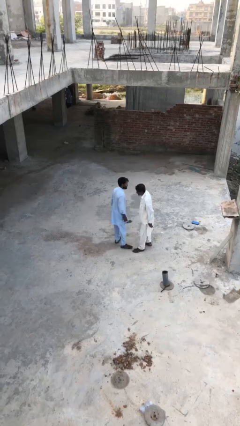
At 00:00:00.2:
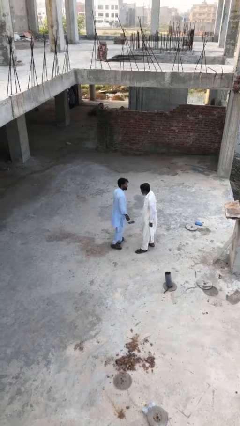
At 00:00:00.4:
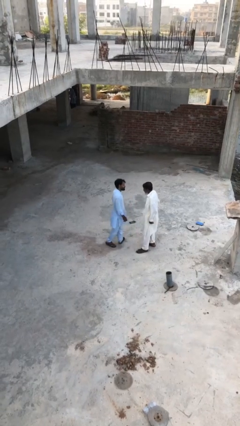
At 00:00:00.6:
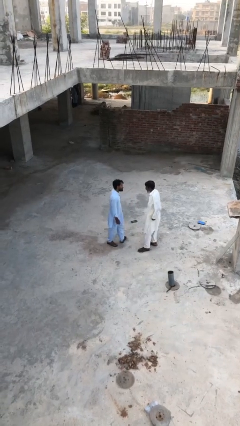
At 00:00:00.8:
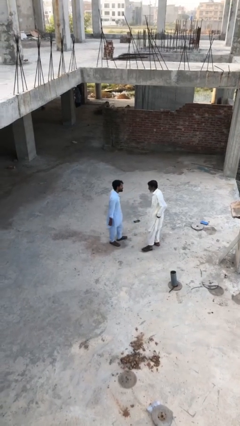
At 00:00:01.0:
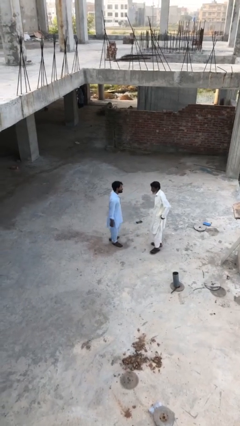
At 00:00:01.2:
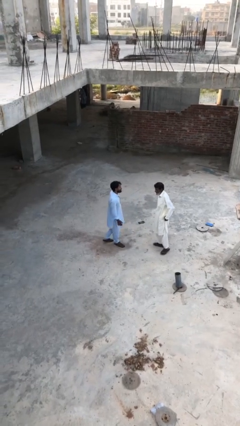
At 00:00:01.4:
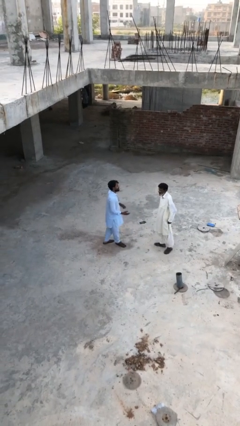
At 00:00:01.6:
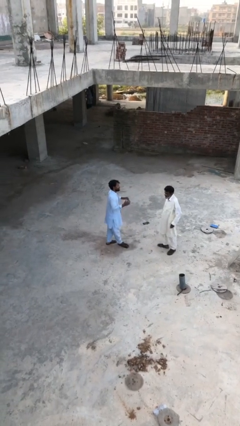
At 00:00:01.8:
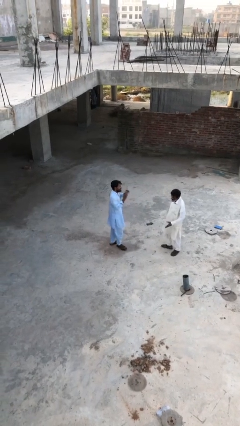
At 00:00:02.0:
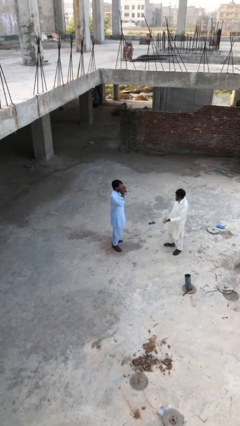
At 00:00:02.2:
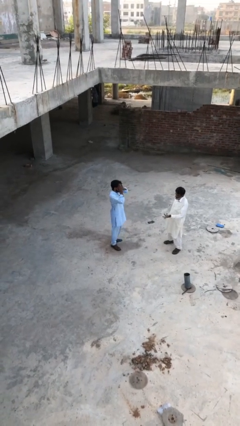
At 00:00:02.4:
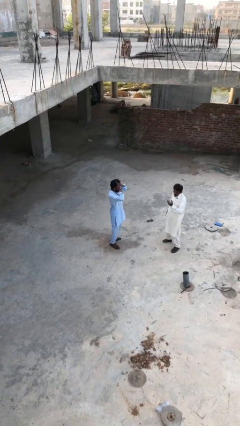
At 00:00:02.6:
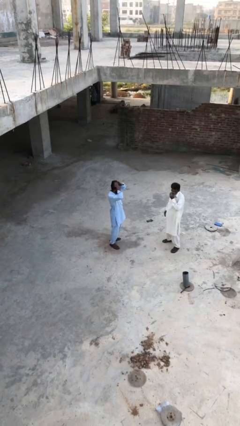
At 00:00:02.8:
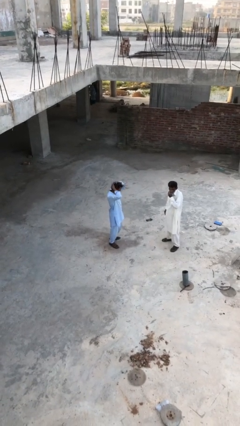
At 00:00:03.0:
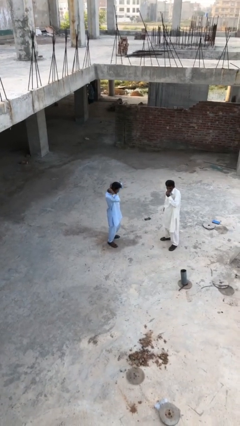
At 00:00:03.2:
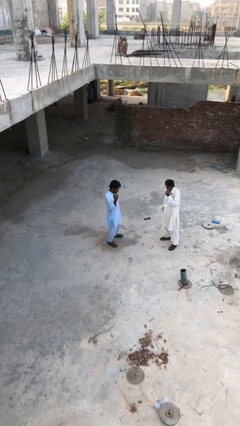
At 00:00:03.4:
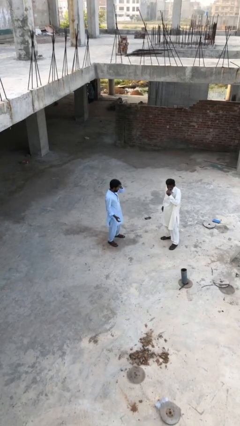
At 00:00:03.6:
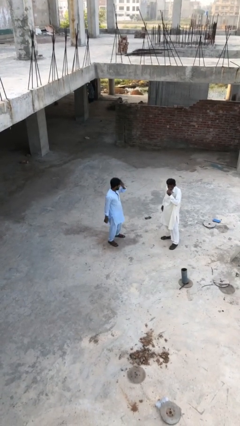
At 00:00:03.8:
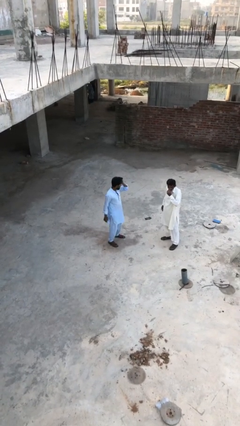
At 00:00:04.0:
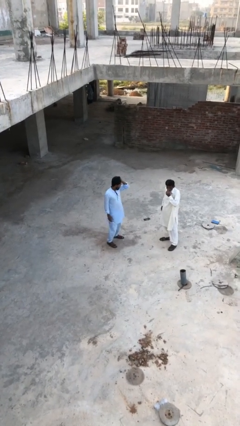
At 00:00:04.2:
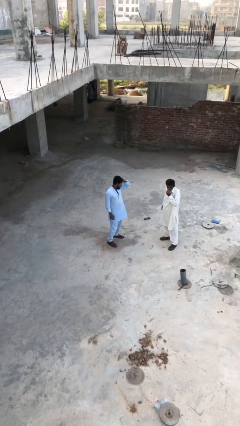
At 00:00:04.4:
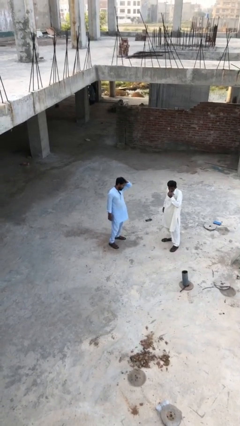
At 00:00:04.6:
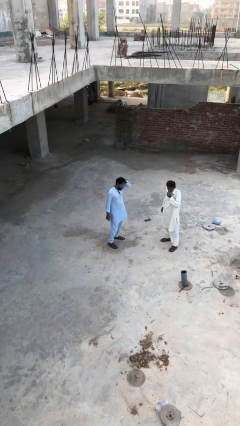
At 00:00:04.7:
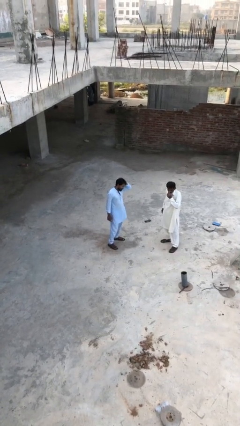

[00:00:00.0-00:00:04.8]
person talks to person

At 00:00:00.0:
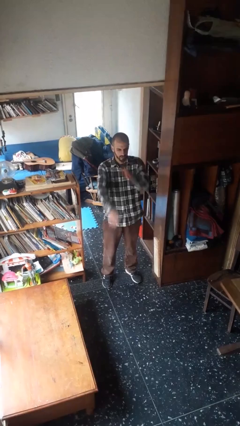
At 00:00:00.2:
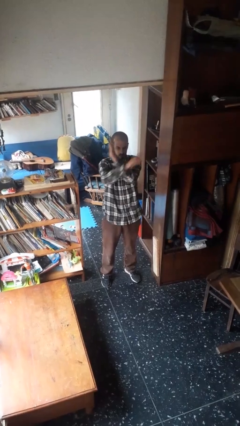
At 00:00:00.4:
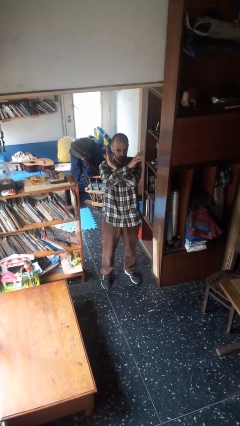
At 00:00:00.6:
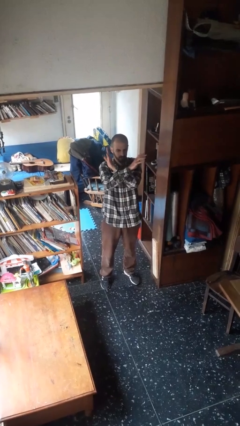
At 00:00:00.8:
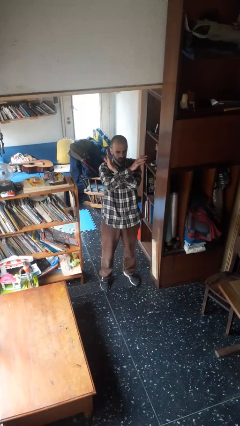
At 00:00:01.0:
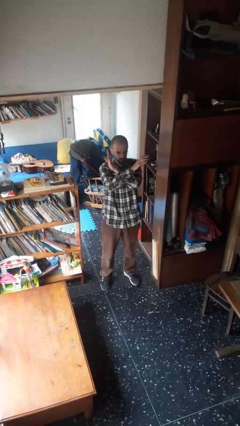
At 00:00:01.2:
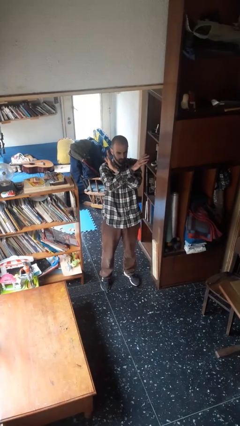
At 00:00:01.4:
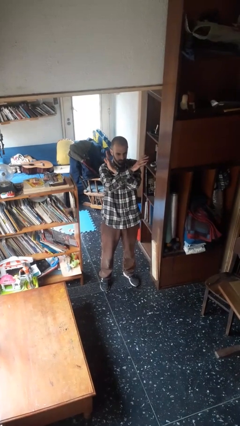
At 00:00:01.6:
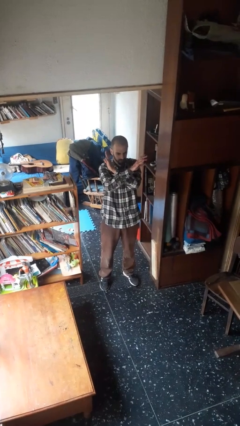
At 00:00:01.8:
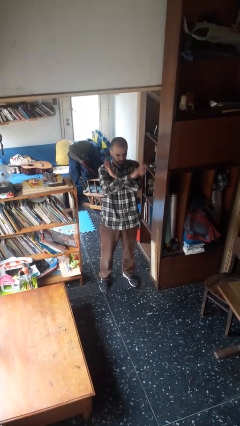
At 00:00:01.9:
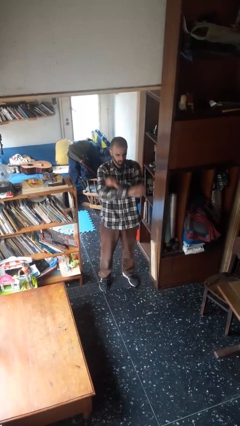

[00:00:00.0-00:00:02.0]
person gestures arms x

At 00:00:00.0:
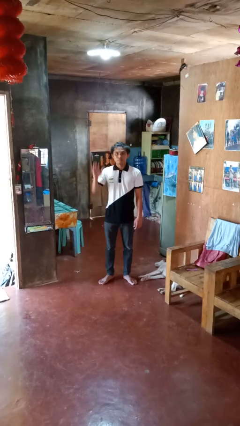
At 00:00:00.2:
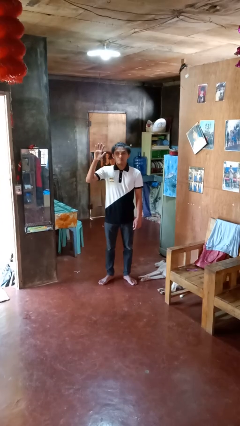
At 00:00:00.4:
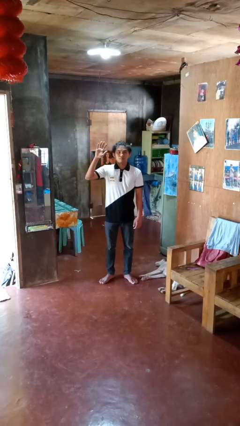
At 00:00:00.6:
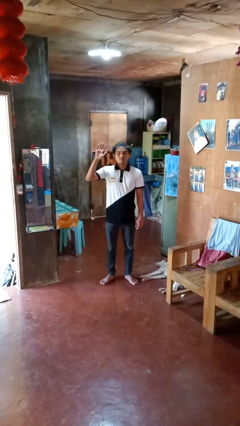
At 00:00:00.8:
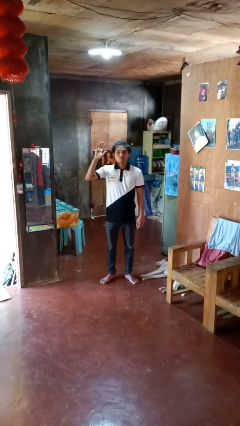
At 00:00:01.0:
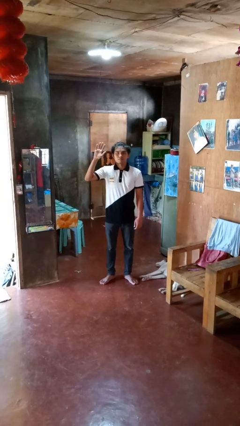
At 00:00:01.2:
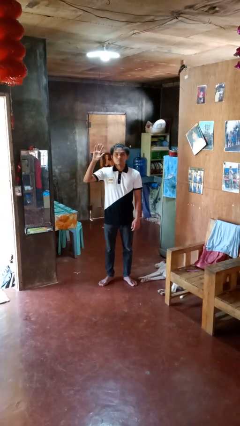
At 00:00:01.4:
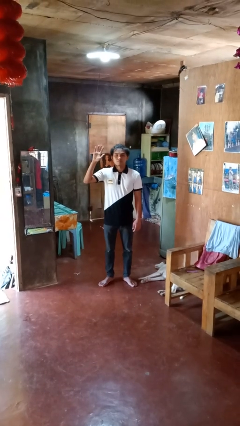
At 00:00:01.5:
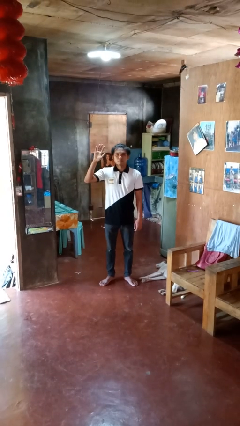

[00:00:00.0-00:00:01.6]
person gestures raise hand

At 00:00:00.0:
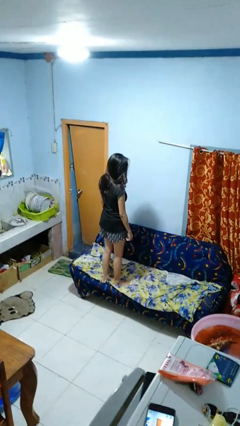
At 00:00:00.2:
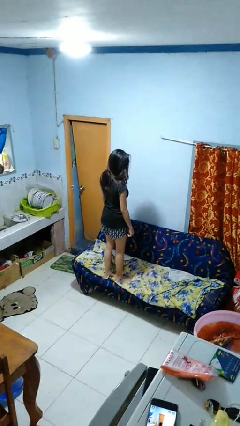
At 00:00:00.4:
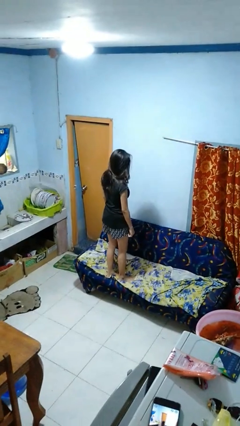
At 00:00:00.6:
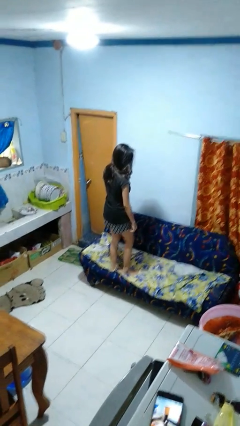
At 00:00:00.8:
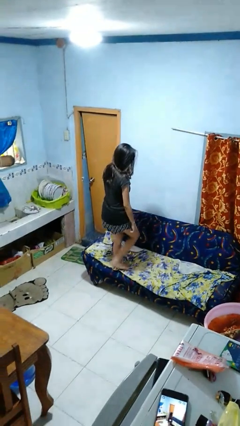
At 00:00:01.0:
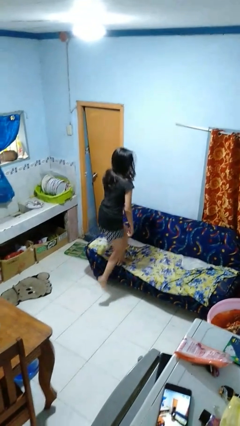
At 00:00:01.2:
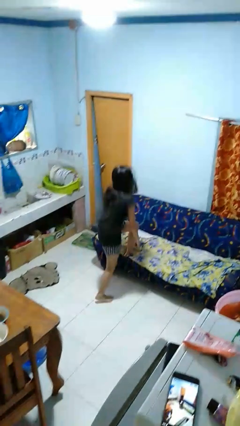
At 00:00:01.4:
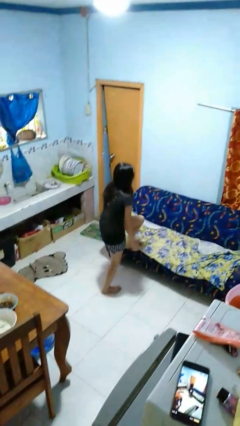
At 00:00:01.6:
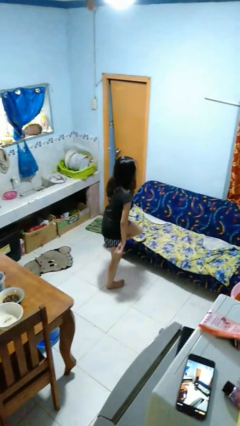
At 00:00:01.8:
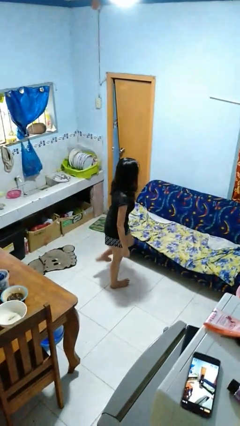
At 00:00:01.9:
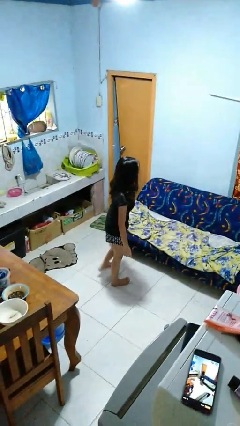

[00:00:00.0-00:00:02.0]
person climbs off couch

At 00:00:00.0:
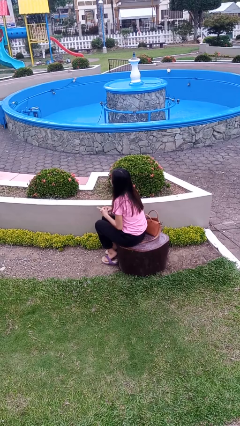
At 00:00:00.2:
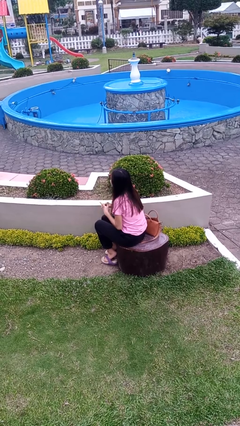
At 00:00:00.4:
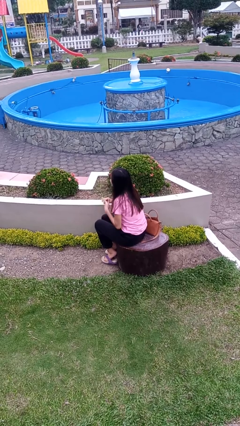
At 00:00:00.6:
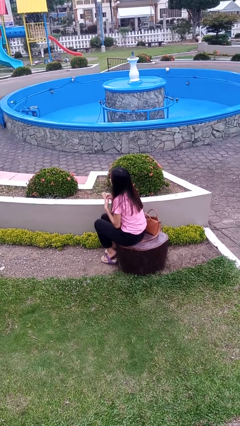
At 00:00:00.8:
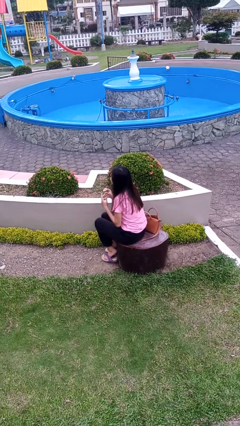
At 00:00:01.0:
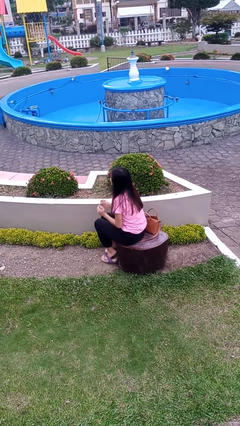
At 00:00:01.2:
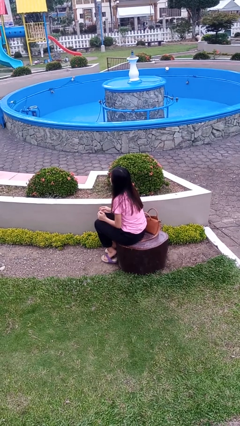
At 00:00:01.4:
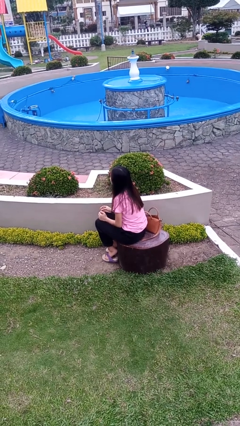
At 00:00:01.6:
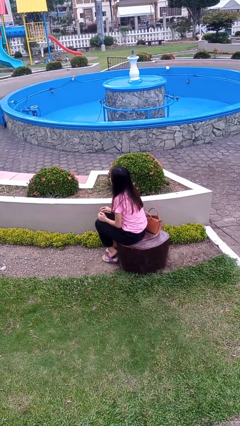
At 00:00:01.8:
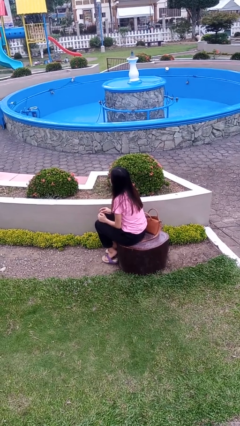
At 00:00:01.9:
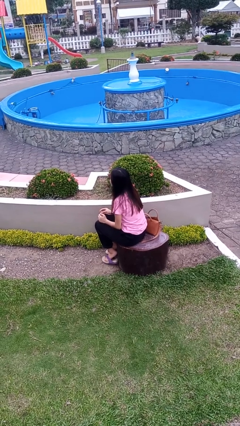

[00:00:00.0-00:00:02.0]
person takes off ring

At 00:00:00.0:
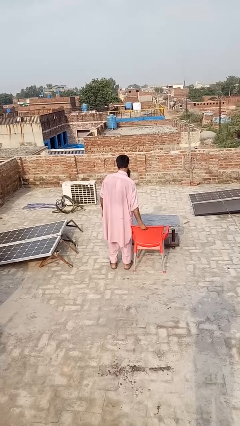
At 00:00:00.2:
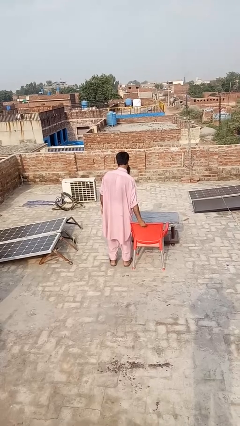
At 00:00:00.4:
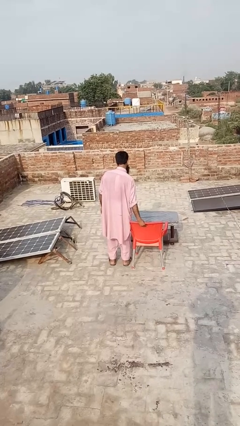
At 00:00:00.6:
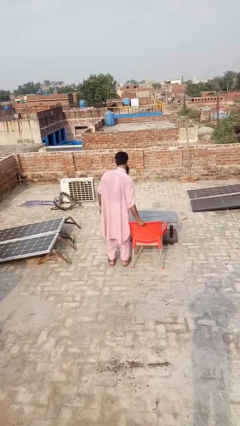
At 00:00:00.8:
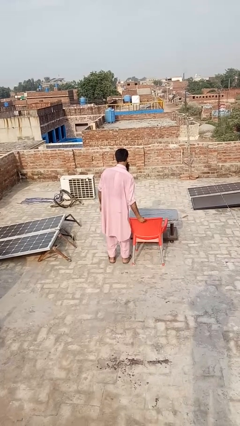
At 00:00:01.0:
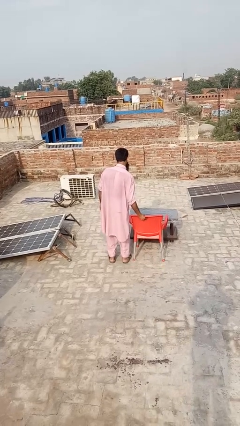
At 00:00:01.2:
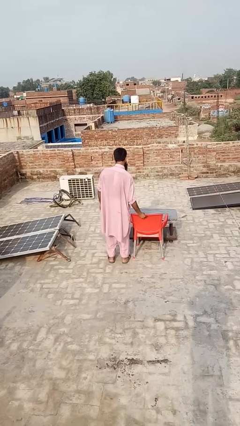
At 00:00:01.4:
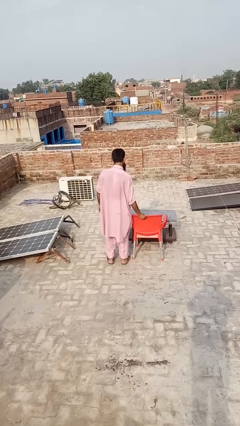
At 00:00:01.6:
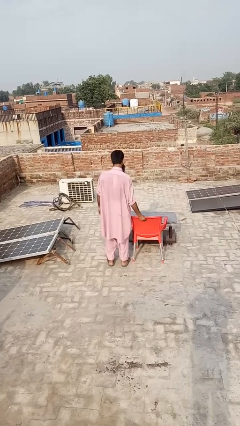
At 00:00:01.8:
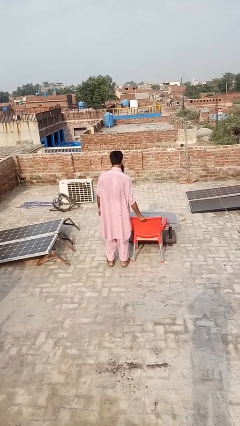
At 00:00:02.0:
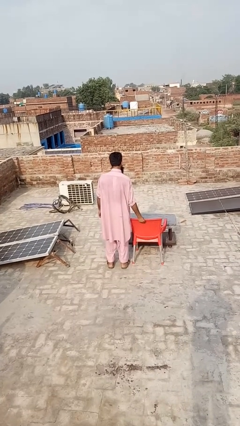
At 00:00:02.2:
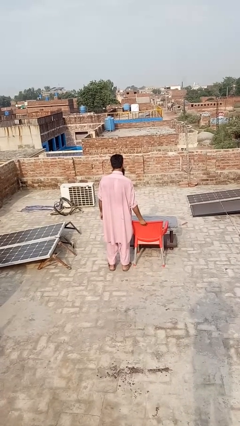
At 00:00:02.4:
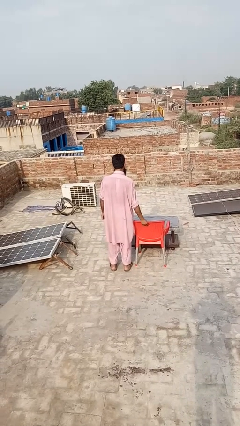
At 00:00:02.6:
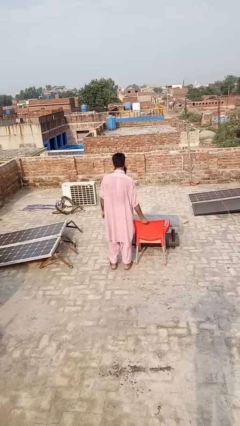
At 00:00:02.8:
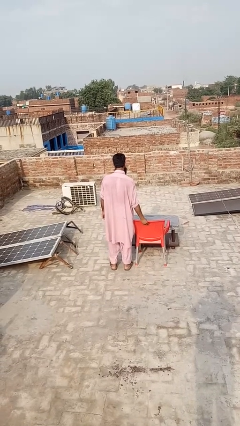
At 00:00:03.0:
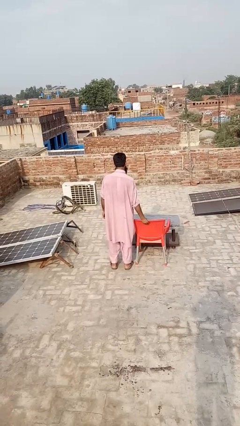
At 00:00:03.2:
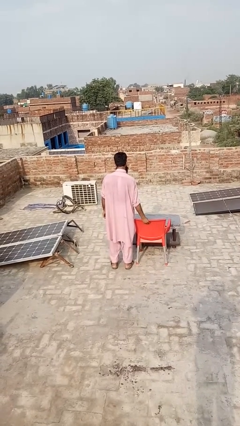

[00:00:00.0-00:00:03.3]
person pushes in chair

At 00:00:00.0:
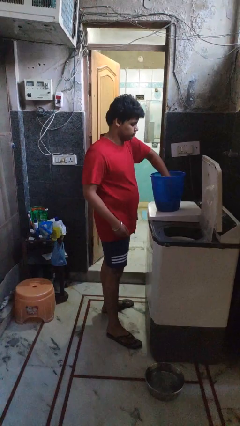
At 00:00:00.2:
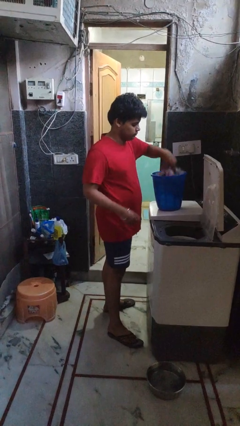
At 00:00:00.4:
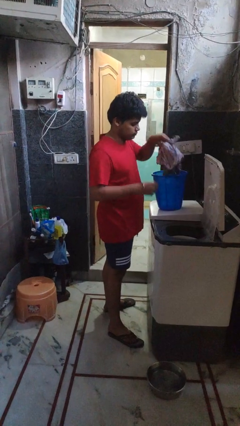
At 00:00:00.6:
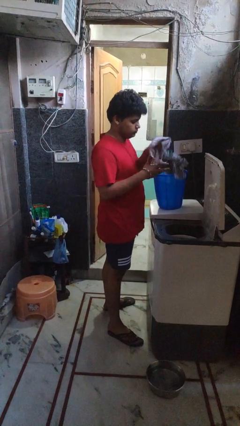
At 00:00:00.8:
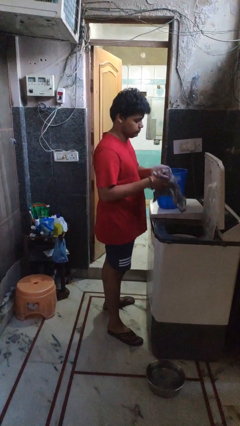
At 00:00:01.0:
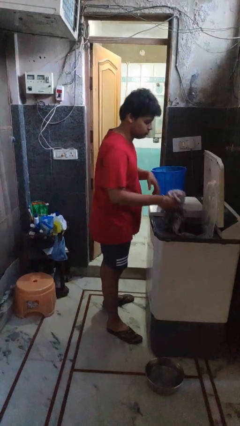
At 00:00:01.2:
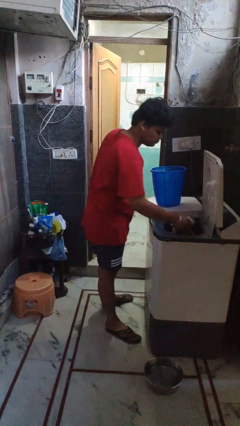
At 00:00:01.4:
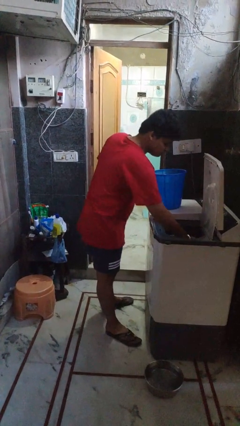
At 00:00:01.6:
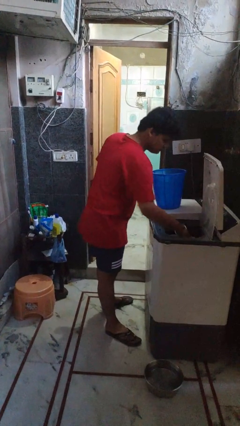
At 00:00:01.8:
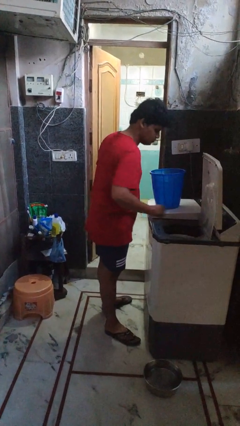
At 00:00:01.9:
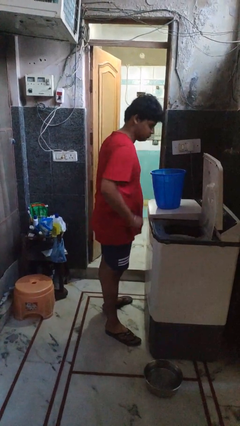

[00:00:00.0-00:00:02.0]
person loads dryer
